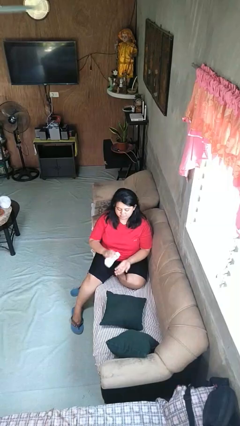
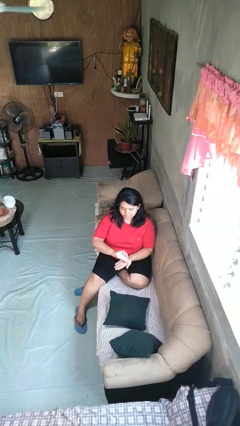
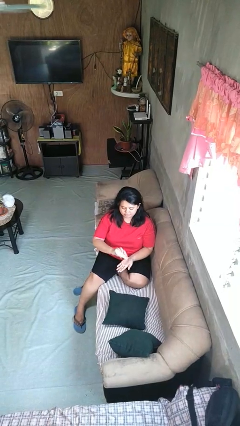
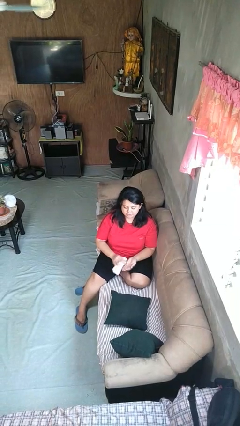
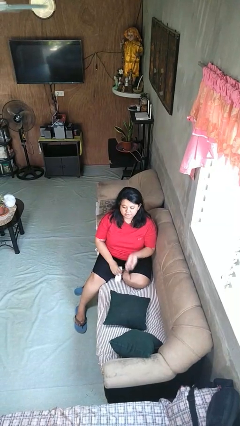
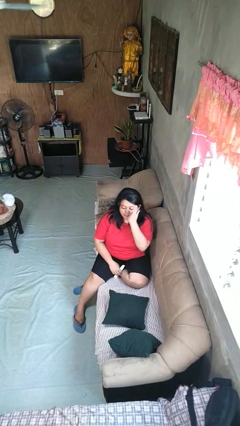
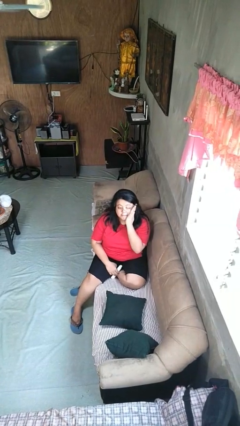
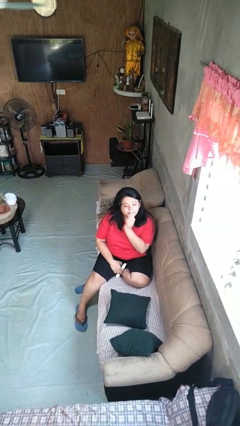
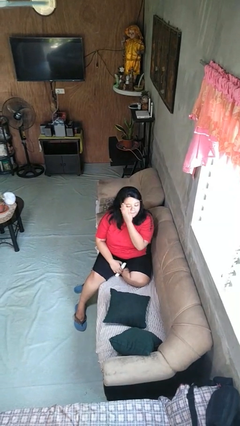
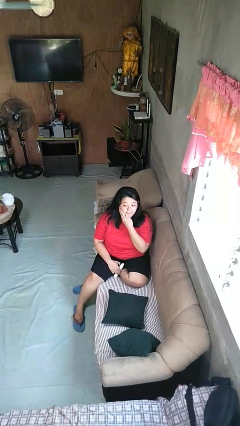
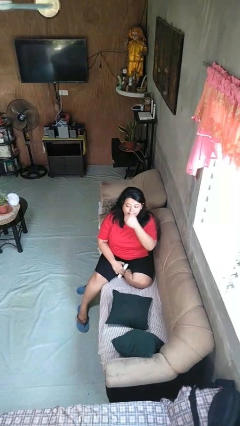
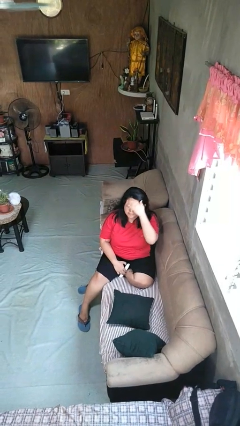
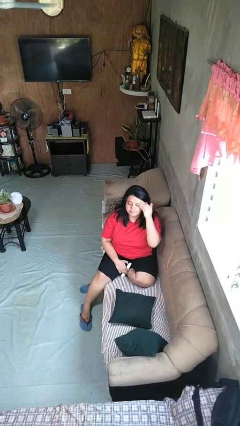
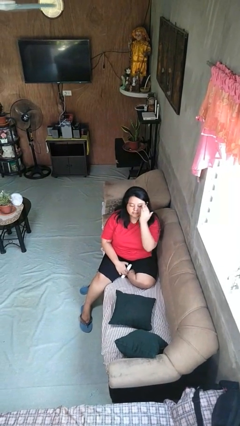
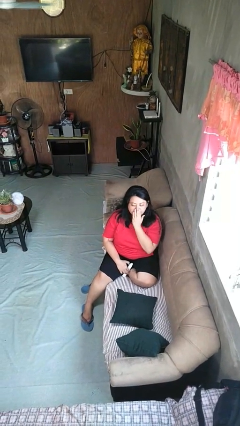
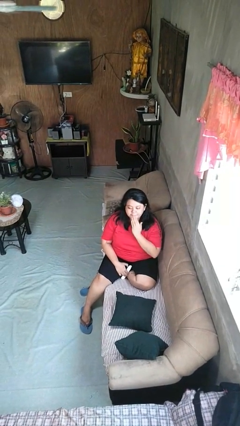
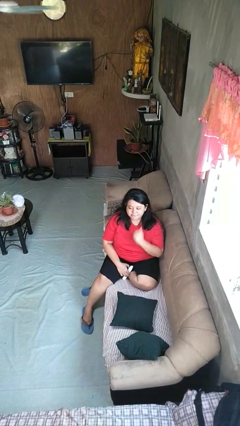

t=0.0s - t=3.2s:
person applies facial moisturizer

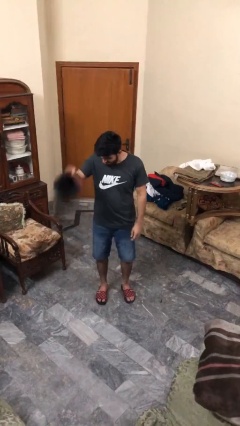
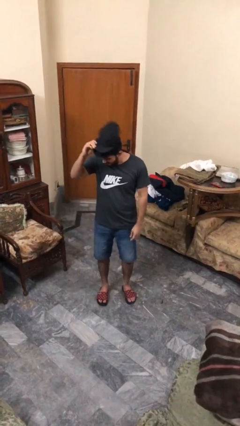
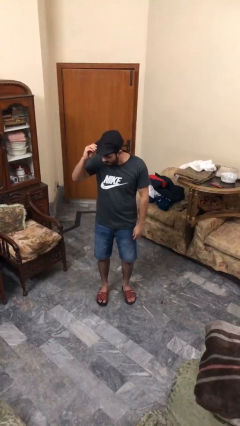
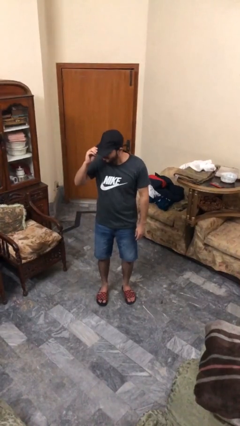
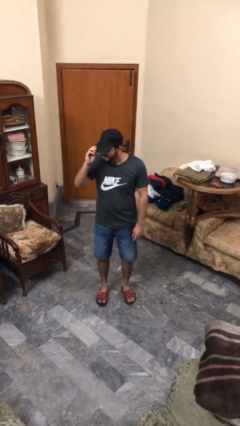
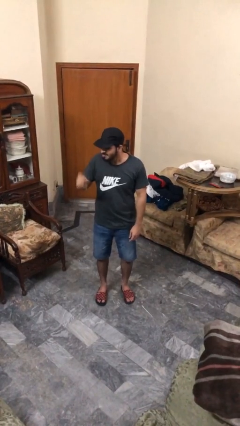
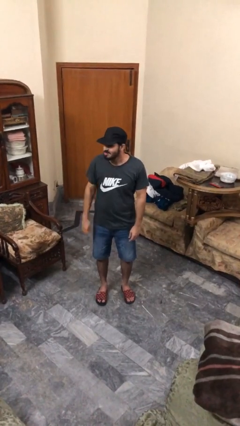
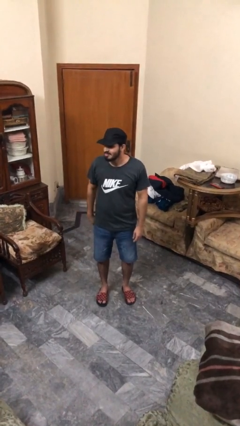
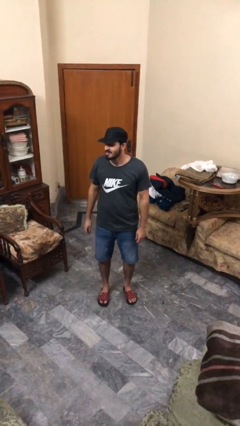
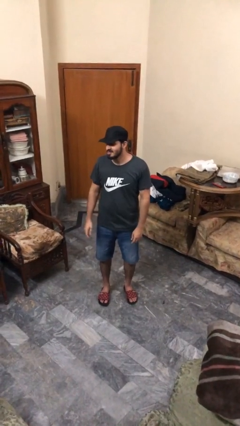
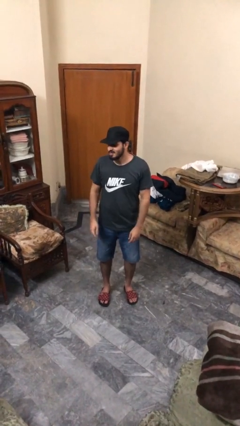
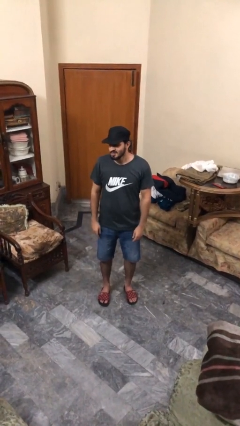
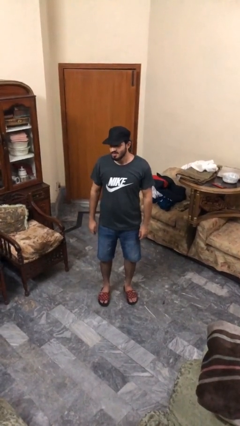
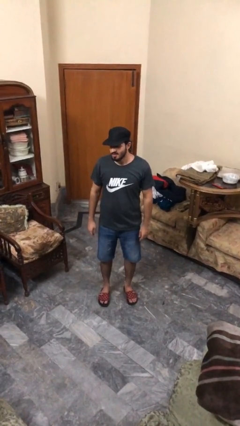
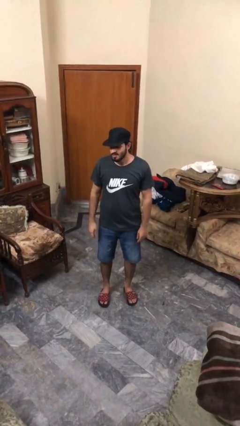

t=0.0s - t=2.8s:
person puts on hat

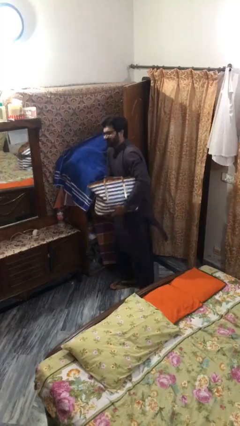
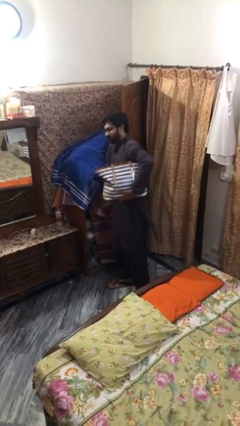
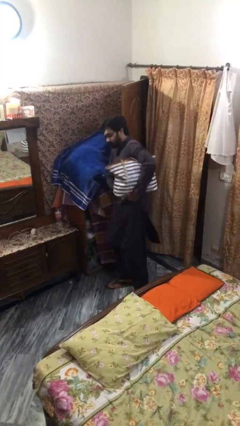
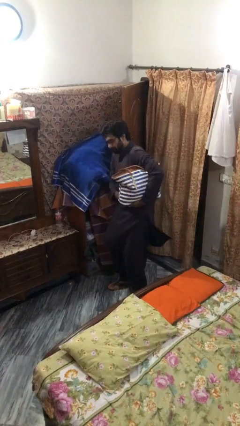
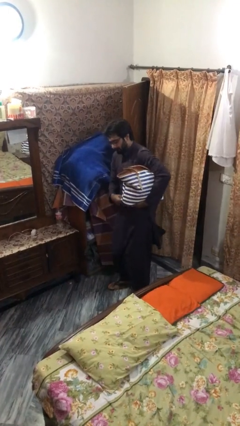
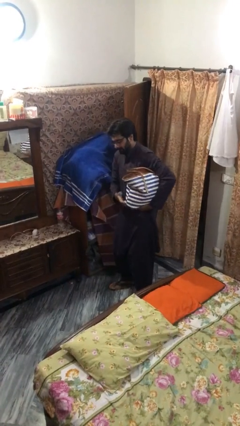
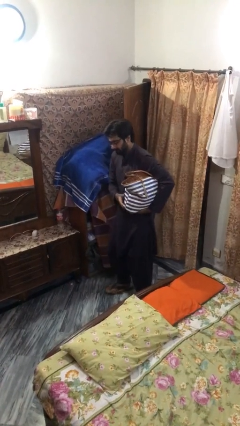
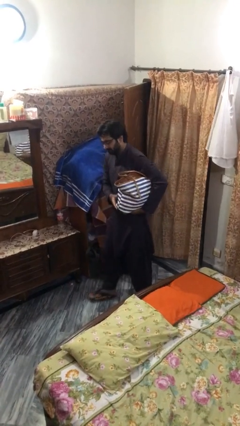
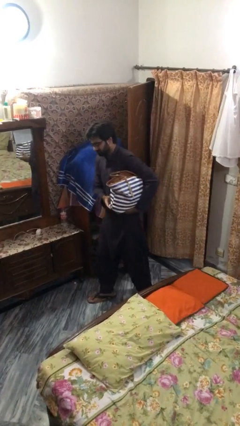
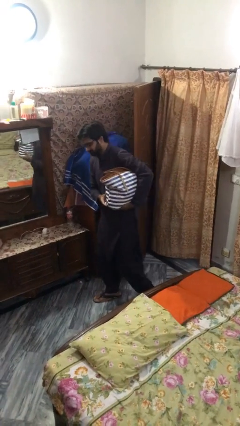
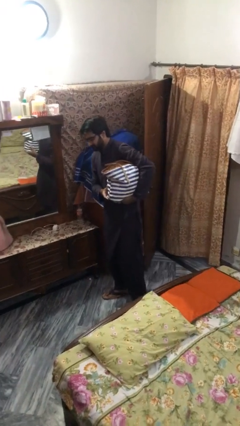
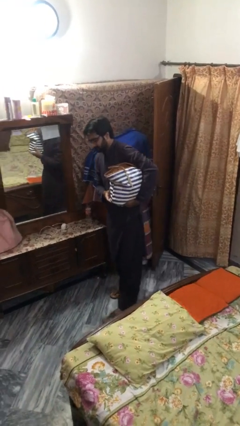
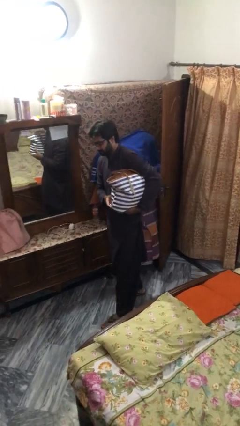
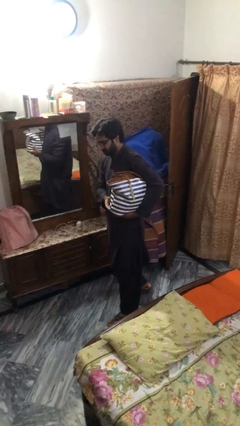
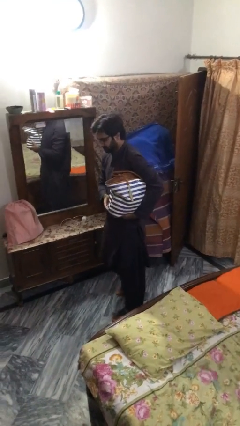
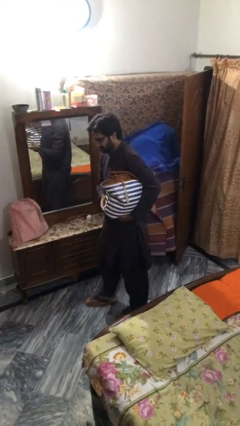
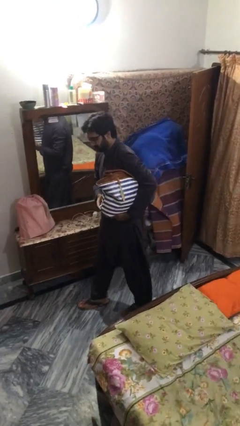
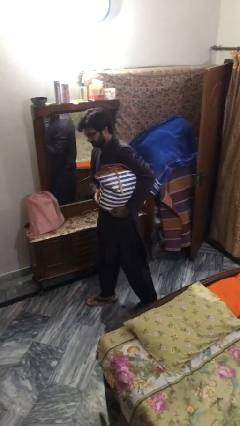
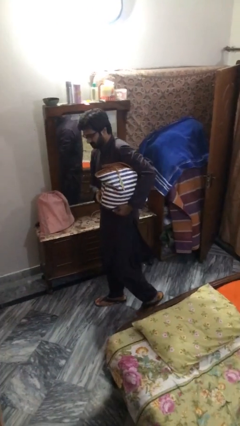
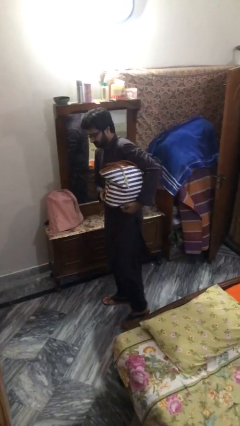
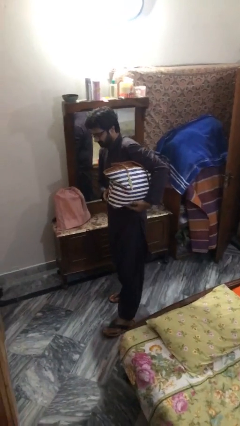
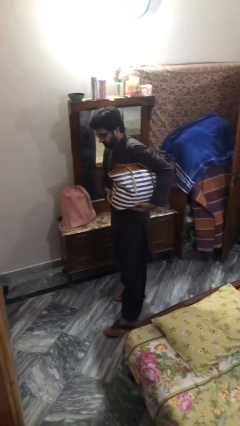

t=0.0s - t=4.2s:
person carries heavy object

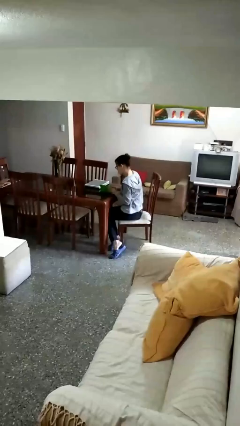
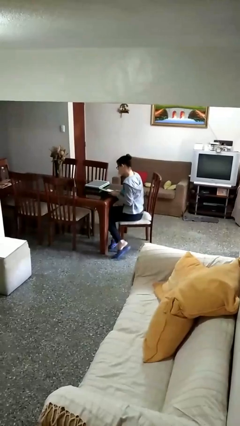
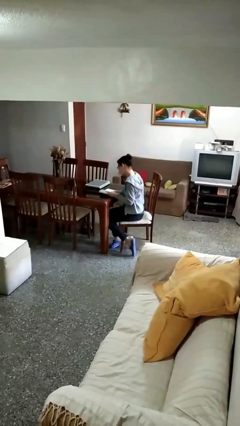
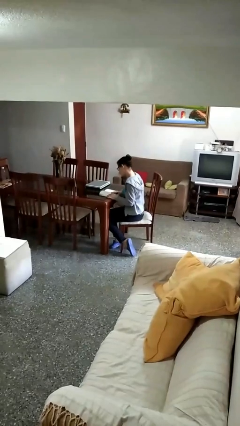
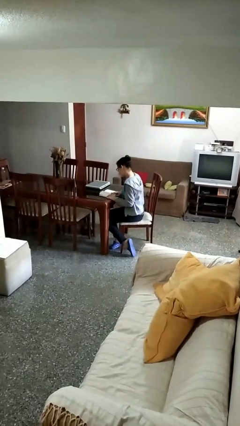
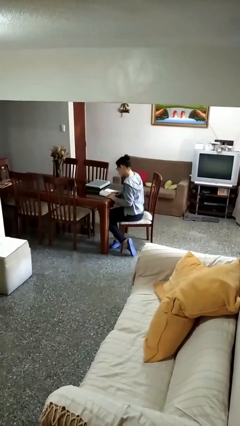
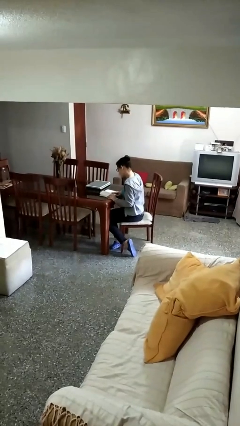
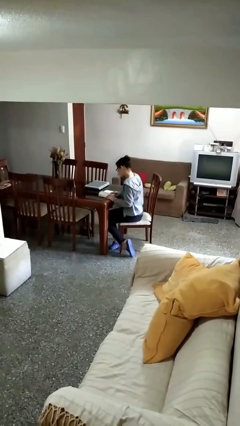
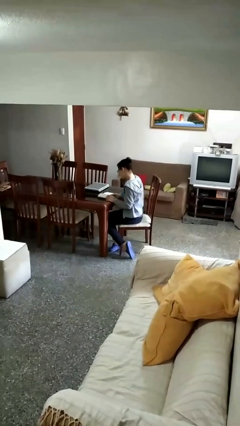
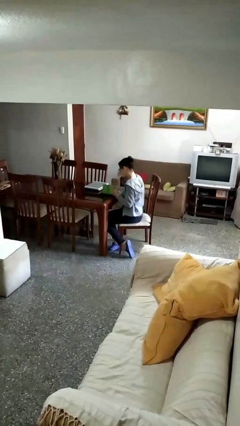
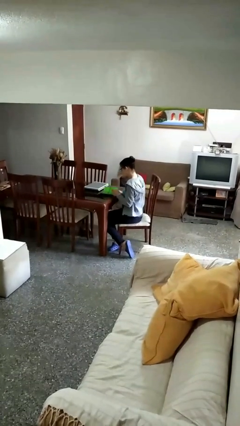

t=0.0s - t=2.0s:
person reads document

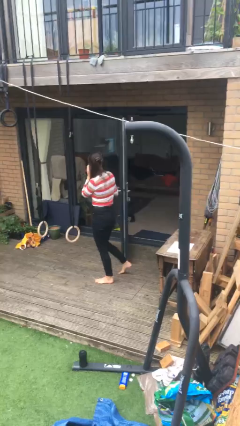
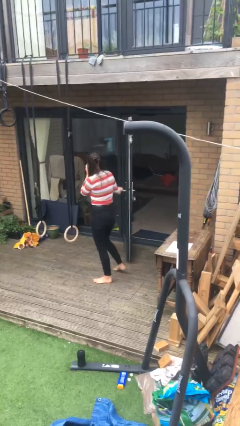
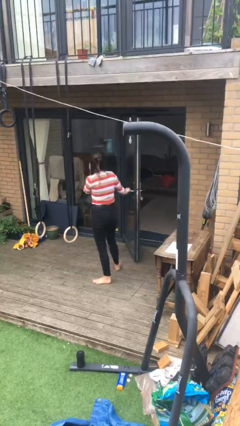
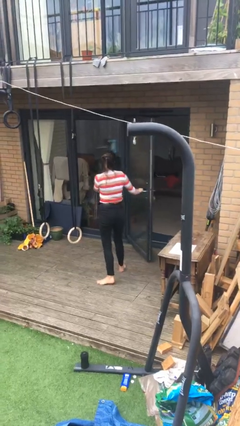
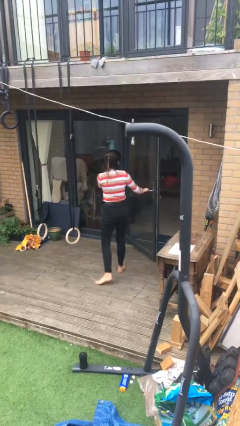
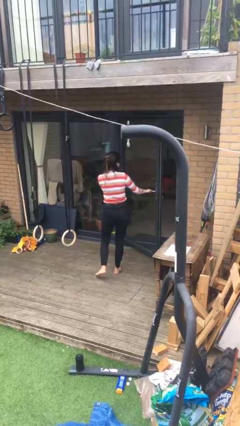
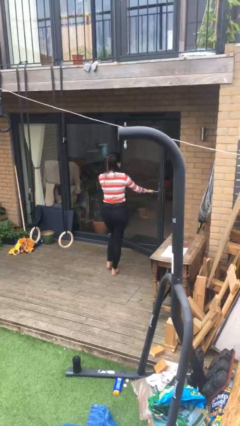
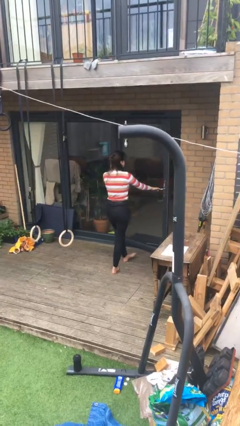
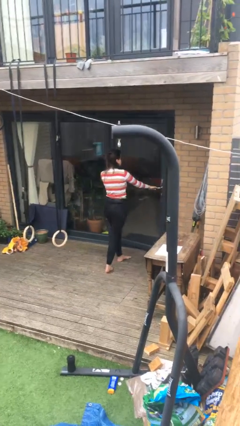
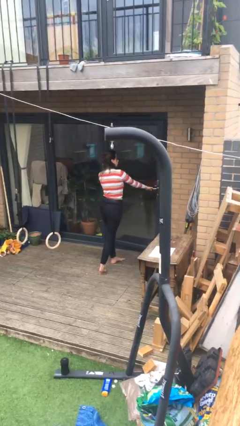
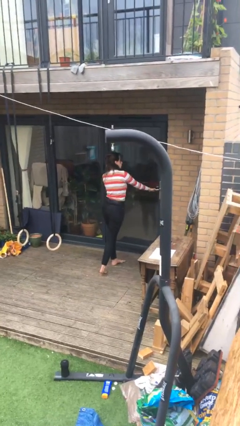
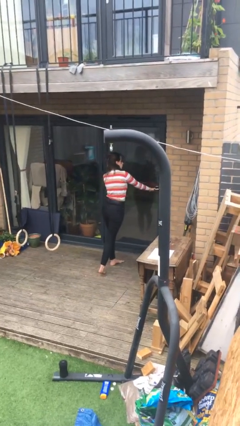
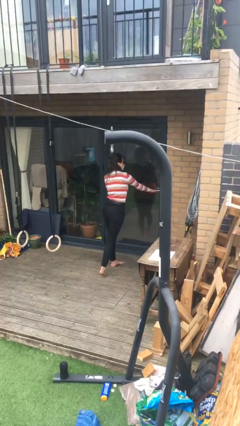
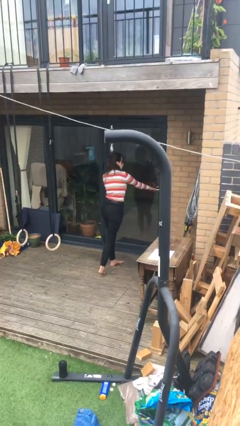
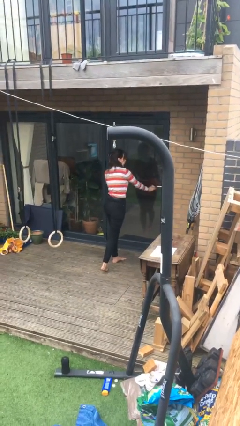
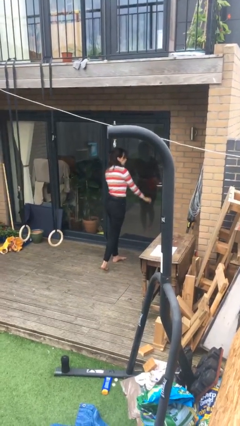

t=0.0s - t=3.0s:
person closes facility door

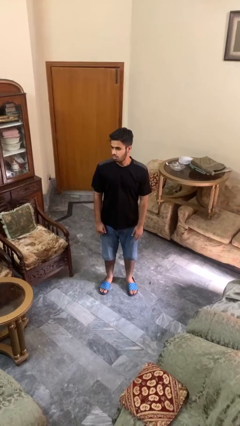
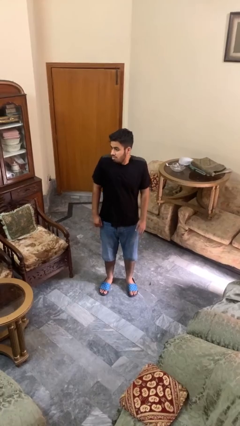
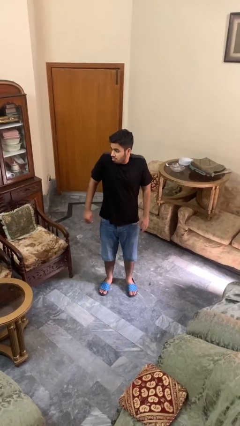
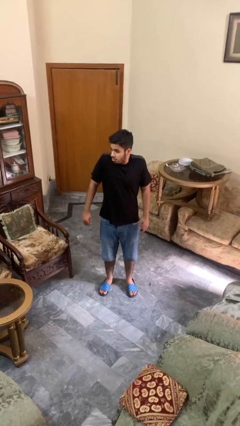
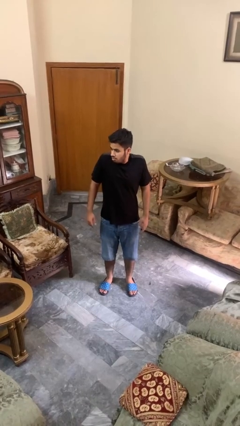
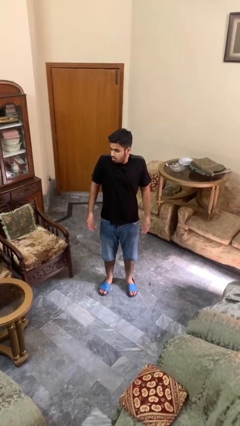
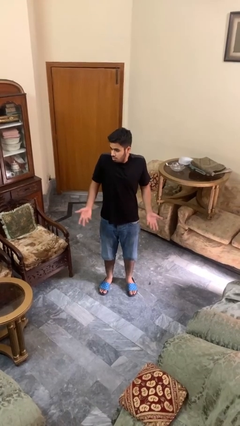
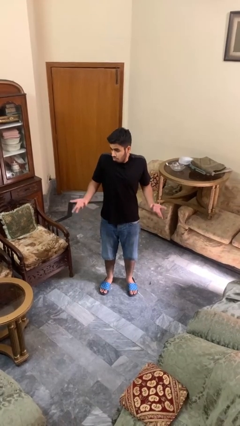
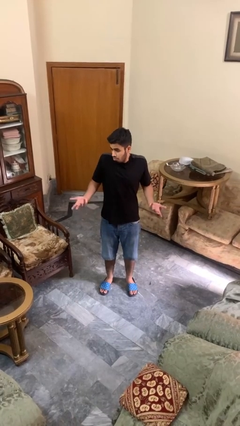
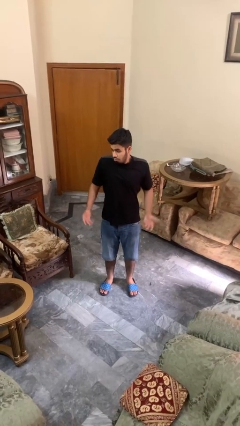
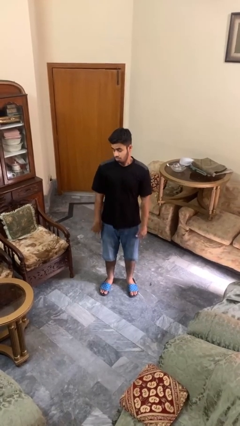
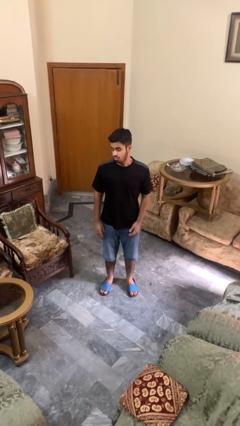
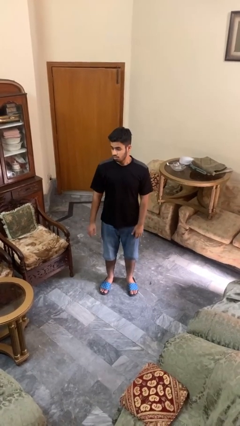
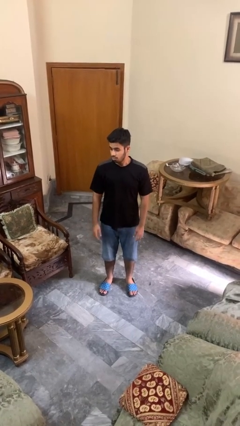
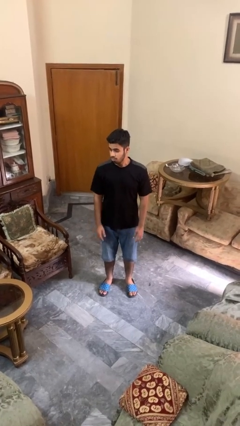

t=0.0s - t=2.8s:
person shrugs
